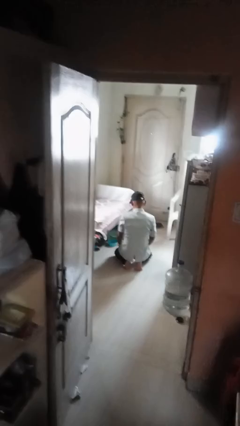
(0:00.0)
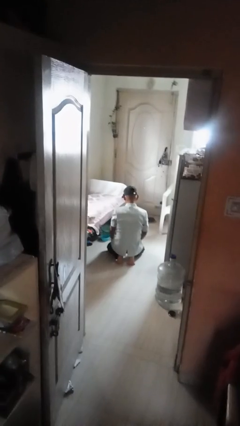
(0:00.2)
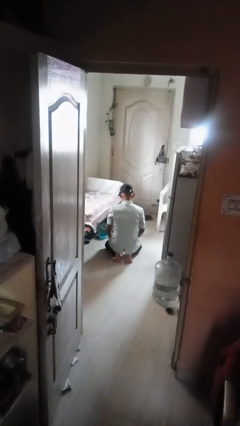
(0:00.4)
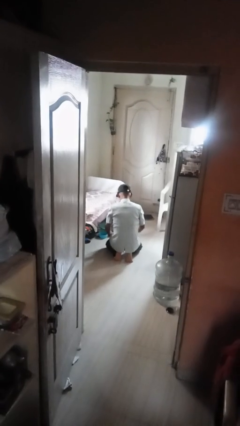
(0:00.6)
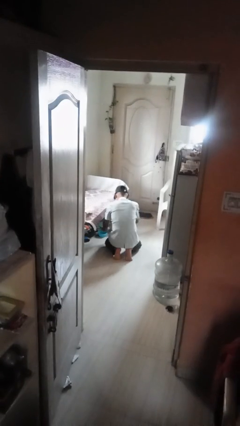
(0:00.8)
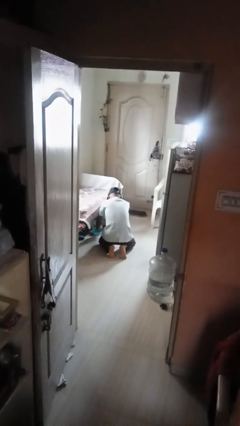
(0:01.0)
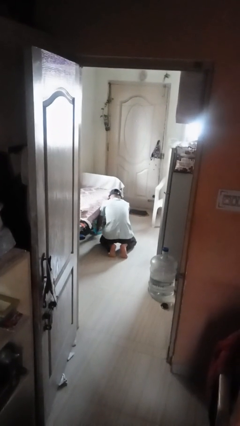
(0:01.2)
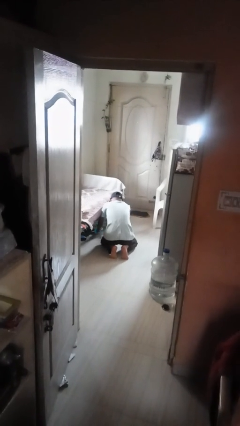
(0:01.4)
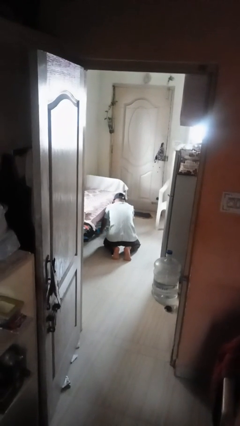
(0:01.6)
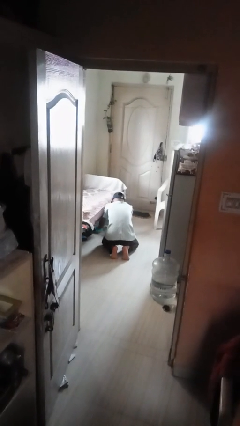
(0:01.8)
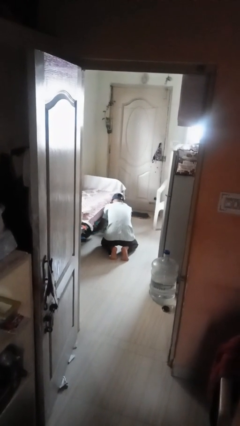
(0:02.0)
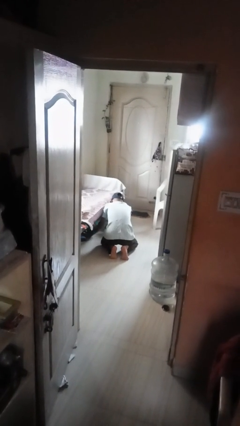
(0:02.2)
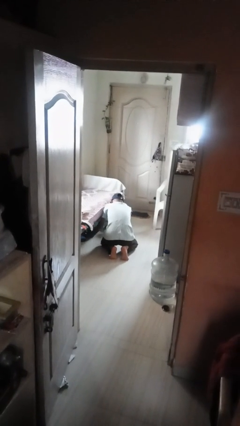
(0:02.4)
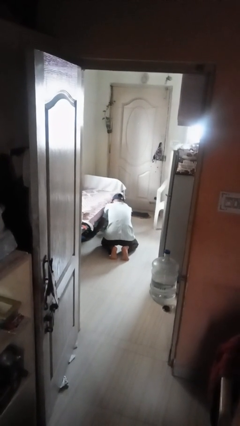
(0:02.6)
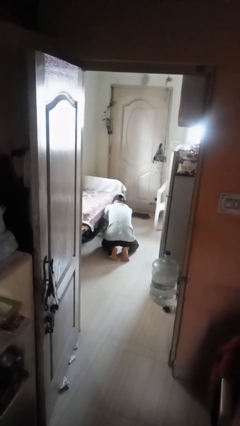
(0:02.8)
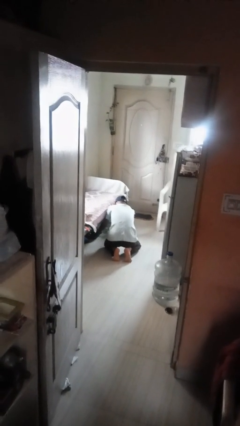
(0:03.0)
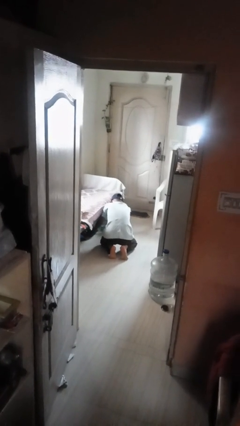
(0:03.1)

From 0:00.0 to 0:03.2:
person searches under bed

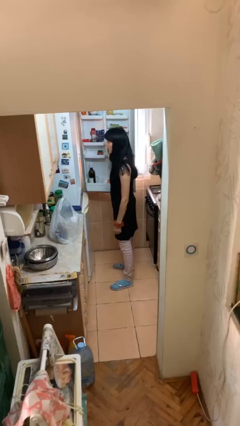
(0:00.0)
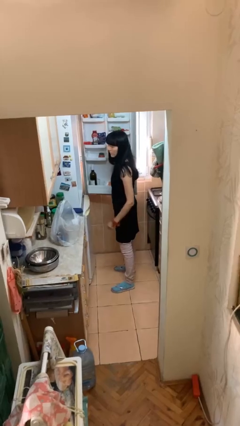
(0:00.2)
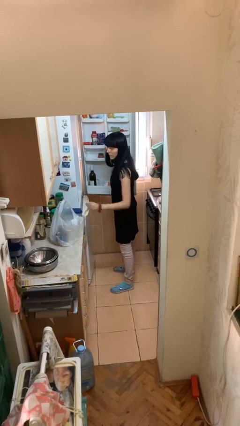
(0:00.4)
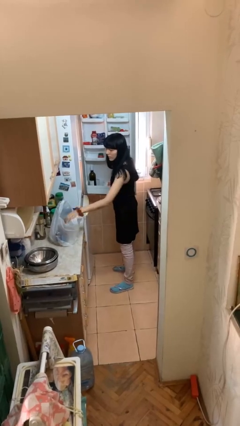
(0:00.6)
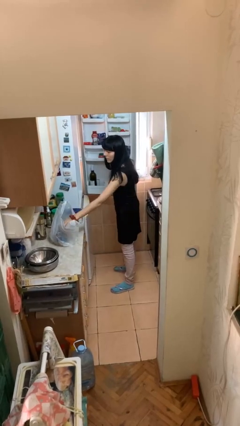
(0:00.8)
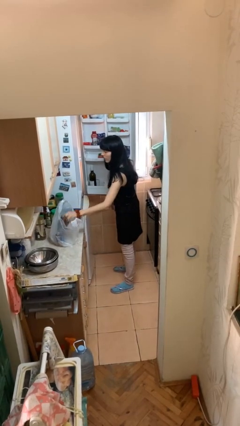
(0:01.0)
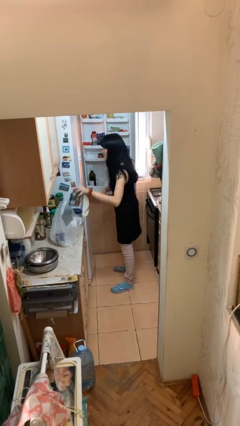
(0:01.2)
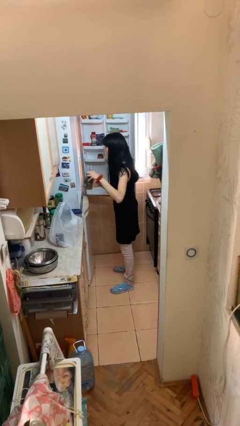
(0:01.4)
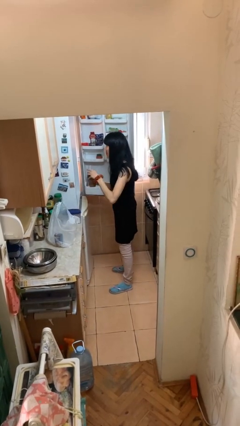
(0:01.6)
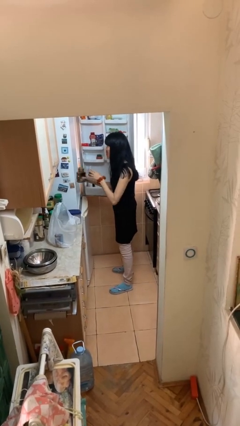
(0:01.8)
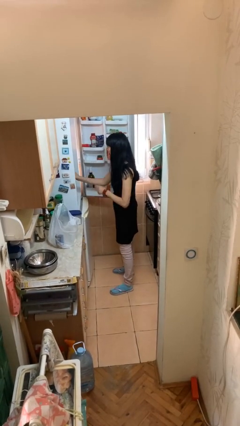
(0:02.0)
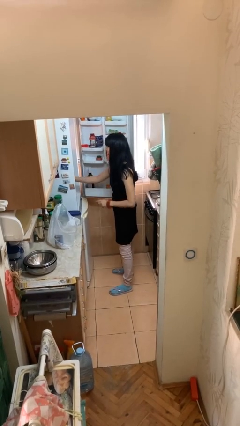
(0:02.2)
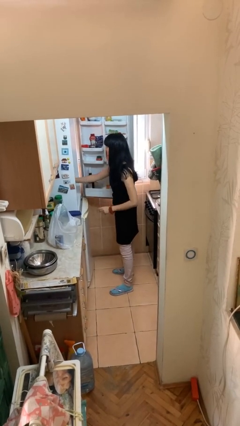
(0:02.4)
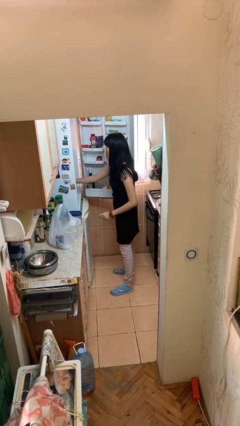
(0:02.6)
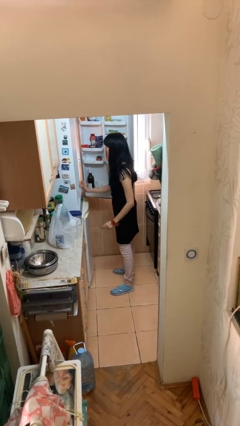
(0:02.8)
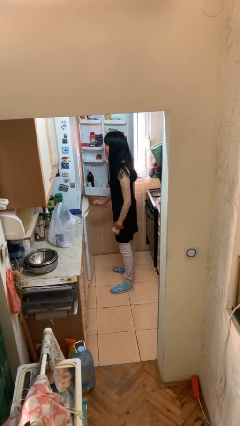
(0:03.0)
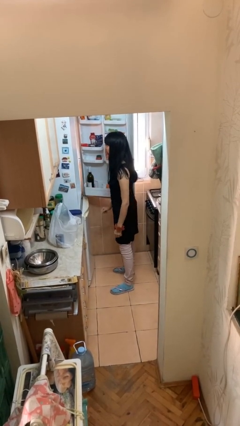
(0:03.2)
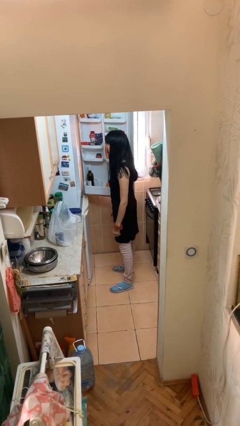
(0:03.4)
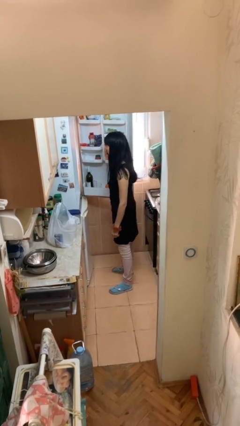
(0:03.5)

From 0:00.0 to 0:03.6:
person loads groceries into refrigerator

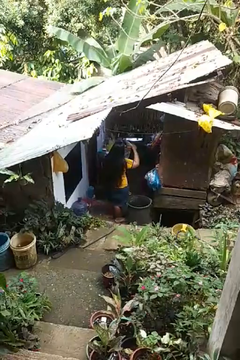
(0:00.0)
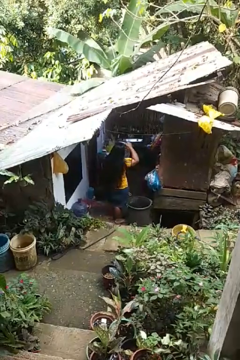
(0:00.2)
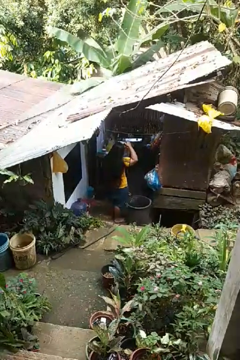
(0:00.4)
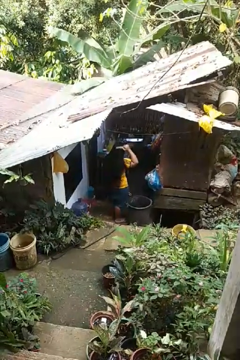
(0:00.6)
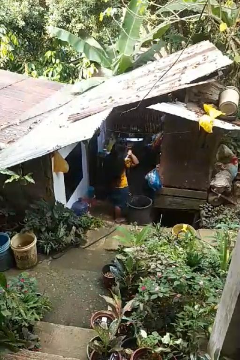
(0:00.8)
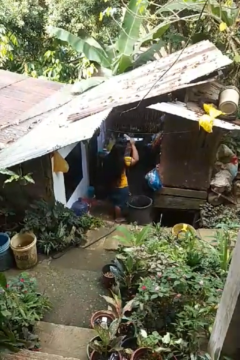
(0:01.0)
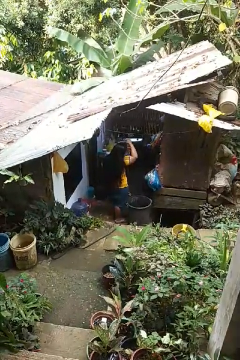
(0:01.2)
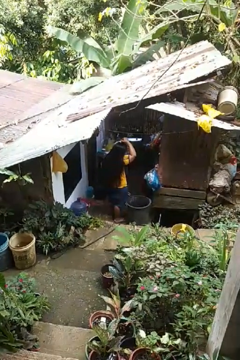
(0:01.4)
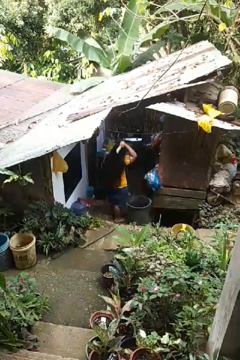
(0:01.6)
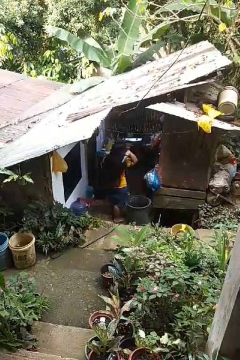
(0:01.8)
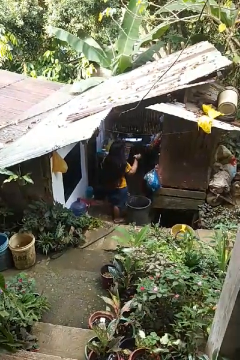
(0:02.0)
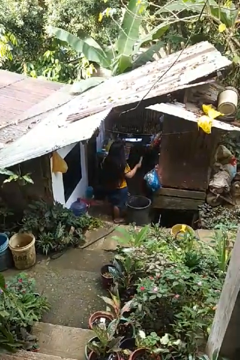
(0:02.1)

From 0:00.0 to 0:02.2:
person brushes hair

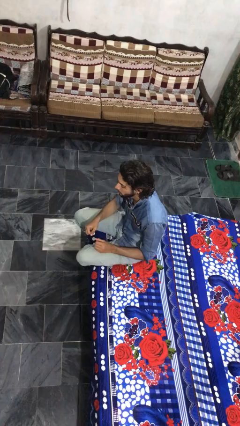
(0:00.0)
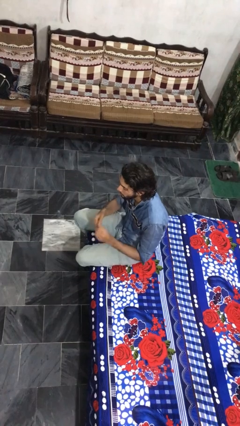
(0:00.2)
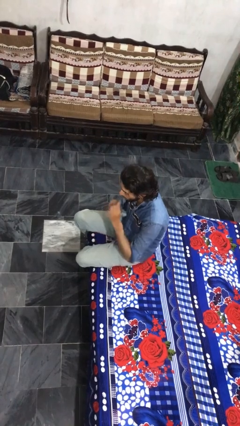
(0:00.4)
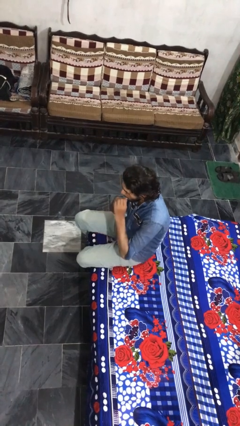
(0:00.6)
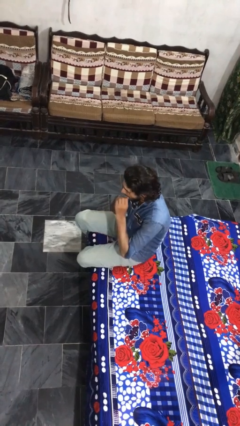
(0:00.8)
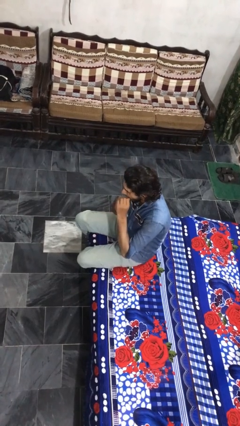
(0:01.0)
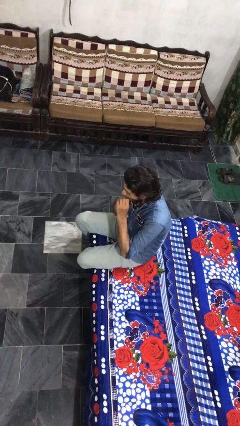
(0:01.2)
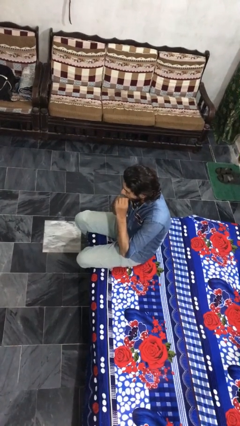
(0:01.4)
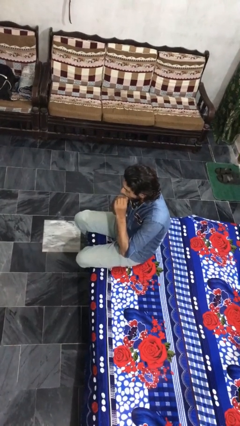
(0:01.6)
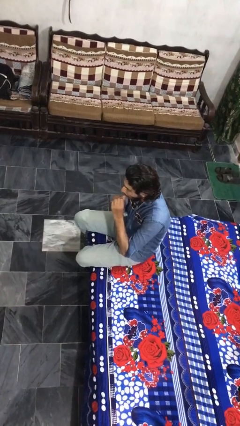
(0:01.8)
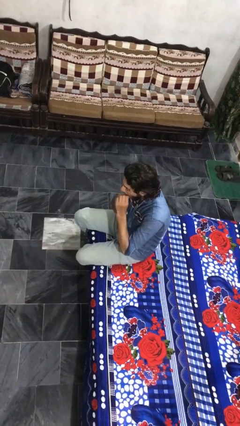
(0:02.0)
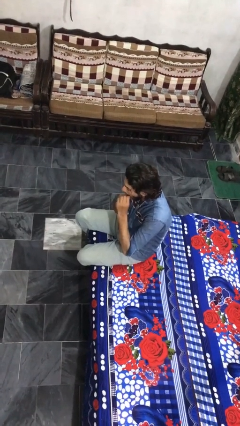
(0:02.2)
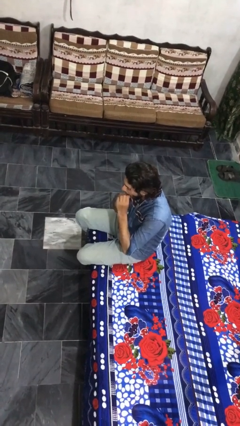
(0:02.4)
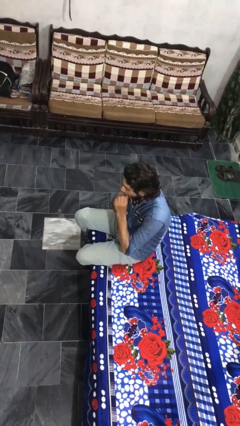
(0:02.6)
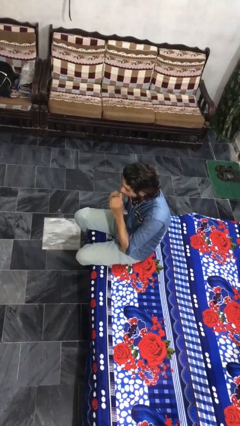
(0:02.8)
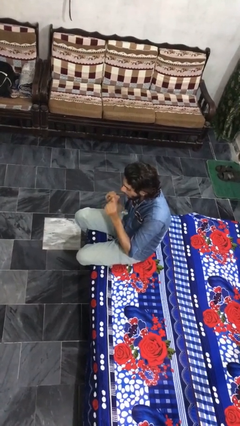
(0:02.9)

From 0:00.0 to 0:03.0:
person flosses

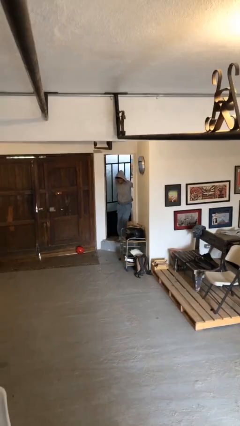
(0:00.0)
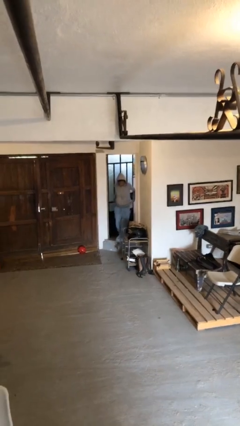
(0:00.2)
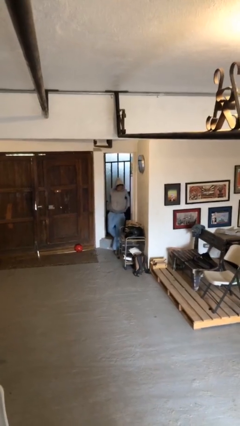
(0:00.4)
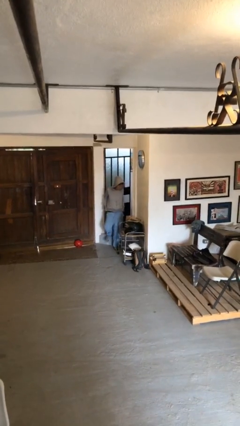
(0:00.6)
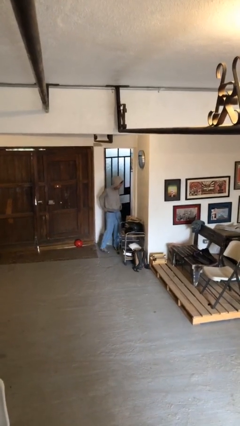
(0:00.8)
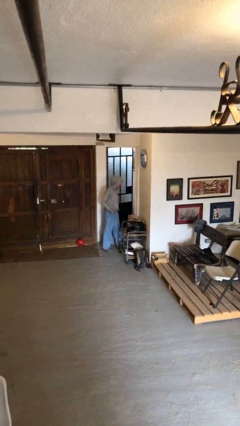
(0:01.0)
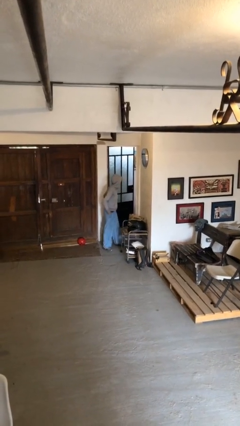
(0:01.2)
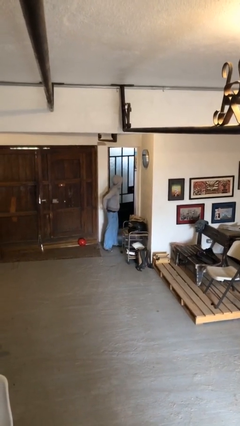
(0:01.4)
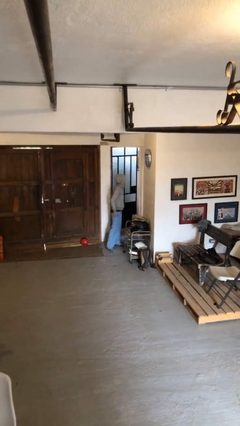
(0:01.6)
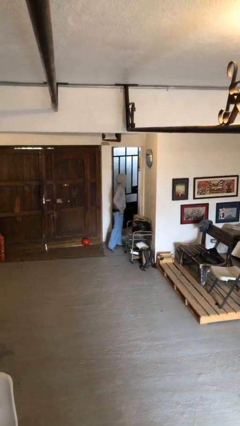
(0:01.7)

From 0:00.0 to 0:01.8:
person enters scene through structure

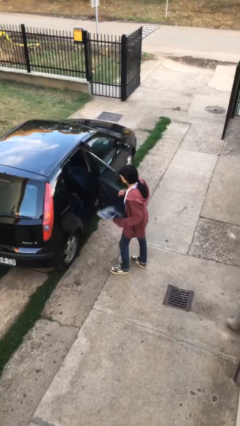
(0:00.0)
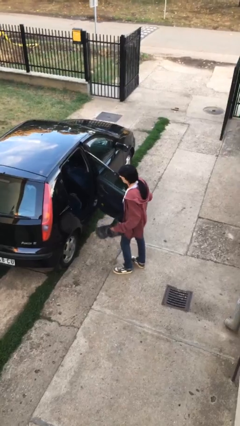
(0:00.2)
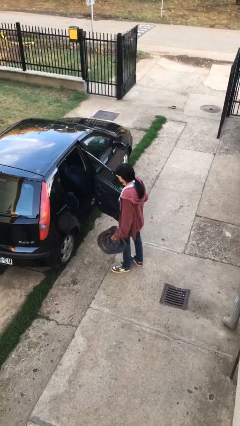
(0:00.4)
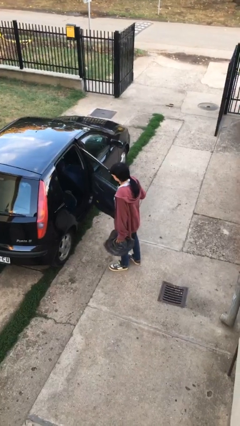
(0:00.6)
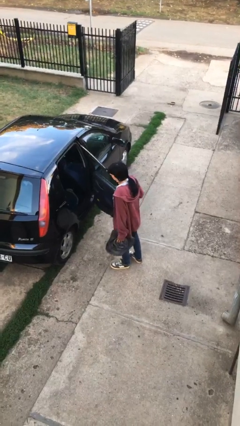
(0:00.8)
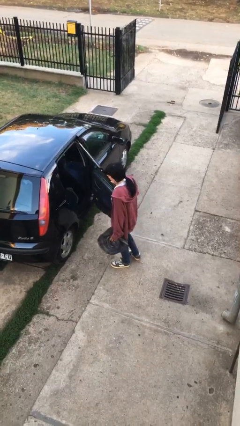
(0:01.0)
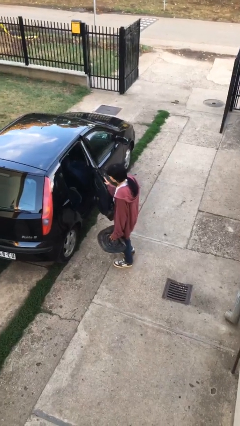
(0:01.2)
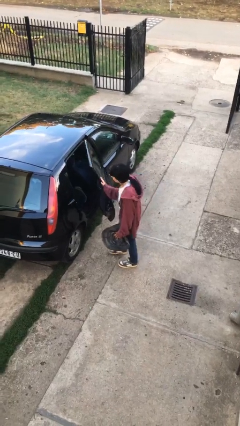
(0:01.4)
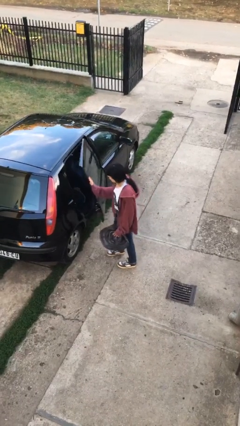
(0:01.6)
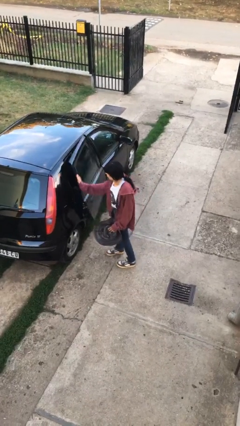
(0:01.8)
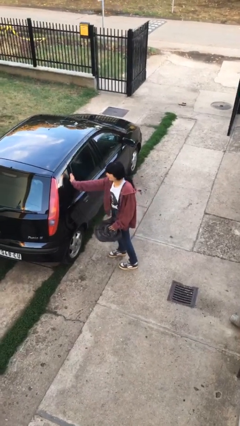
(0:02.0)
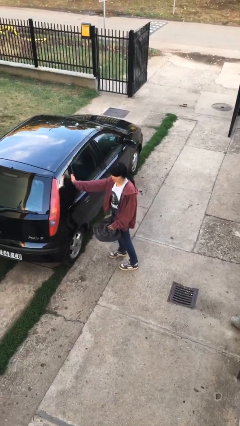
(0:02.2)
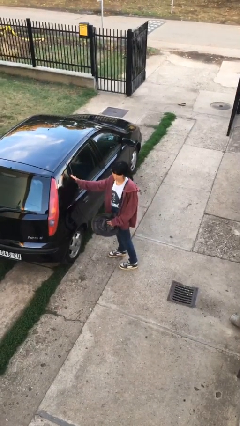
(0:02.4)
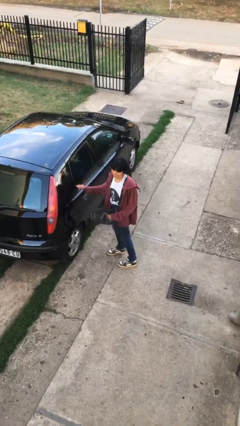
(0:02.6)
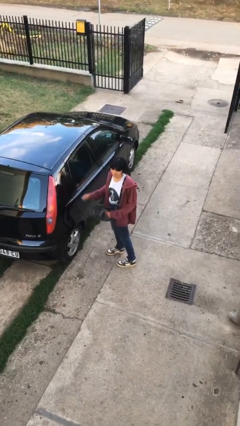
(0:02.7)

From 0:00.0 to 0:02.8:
person closes car door

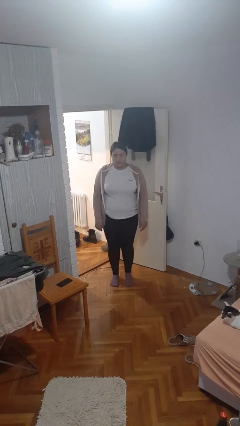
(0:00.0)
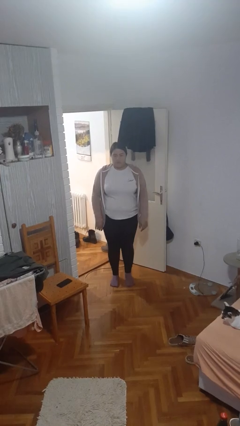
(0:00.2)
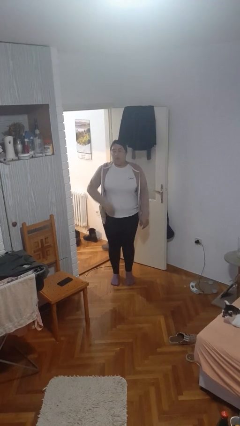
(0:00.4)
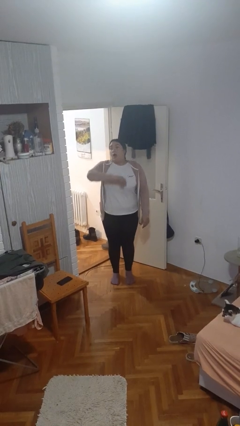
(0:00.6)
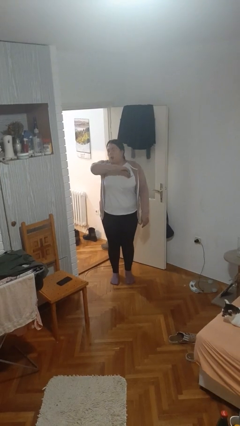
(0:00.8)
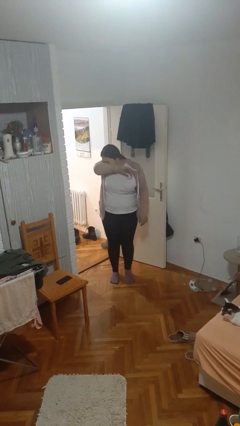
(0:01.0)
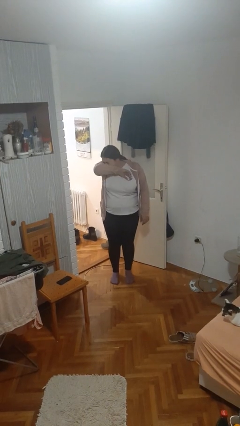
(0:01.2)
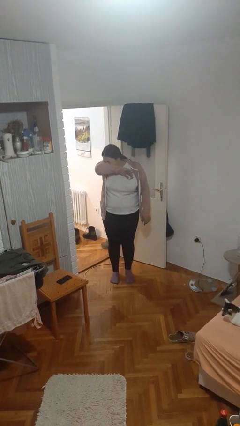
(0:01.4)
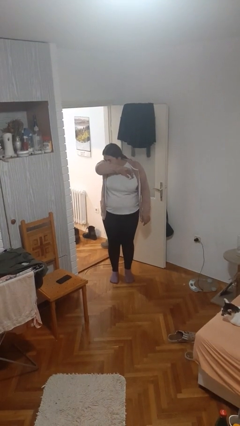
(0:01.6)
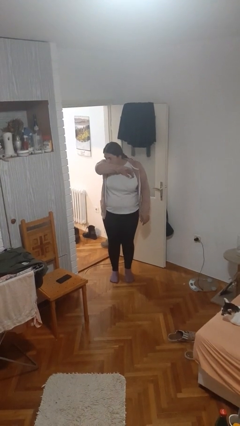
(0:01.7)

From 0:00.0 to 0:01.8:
person sneezes into arm
